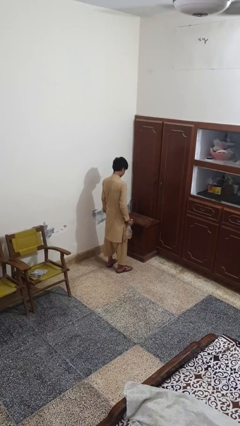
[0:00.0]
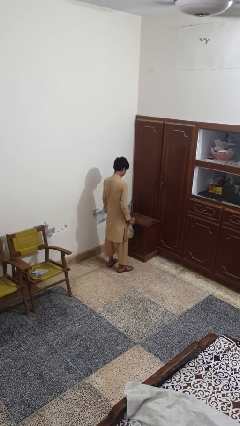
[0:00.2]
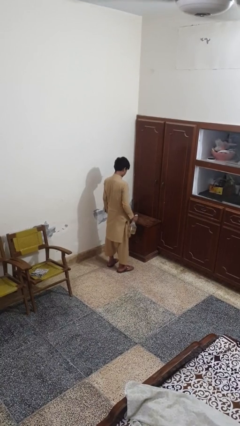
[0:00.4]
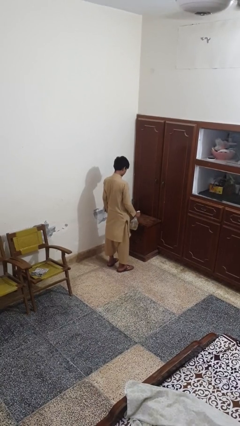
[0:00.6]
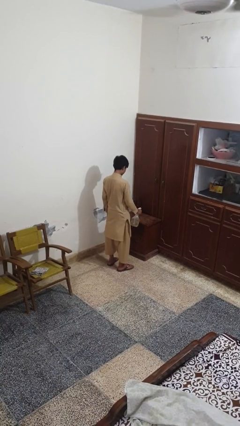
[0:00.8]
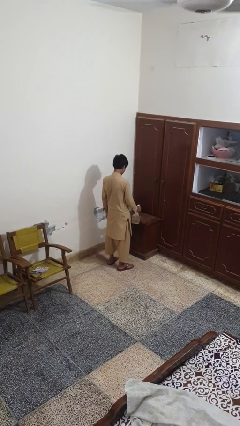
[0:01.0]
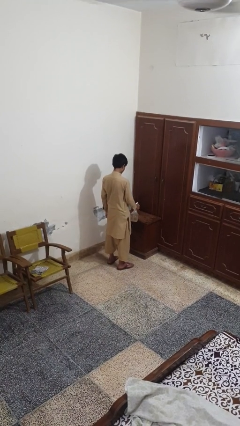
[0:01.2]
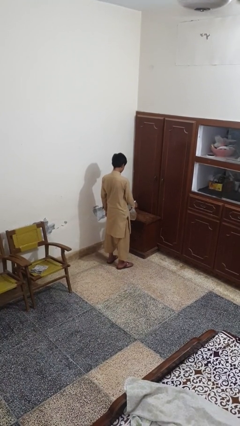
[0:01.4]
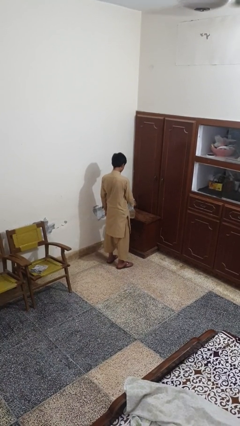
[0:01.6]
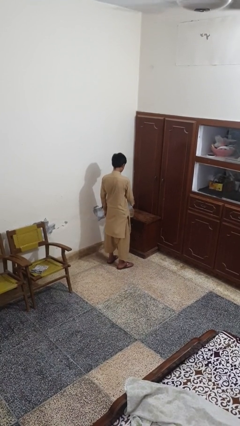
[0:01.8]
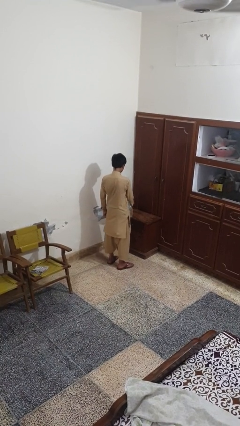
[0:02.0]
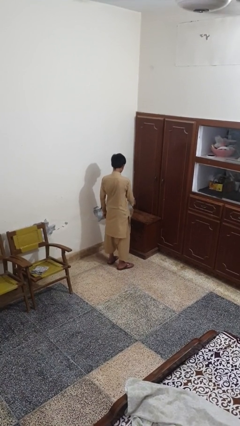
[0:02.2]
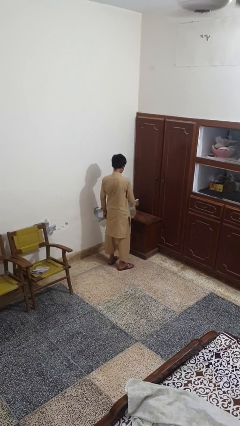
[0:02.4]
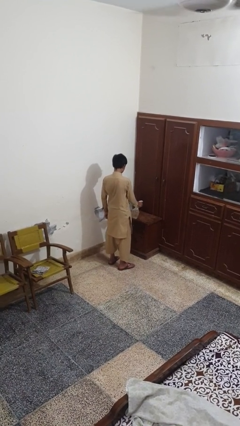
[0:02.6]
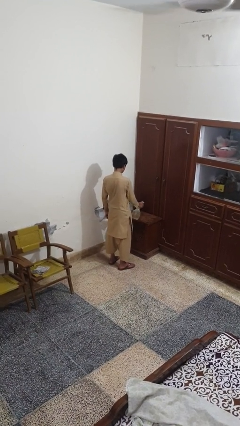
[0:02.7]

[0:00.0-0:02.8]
person sprays from bottle
